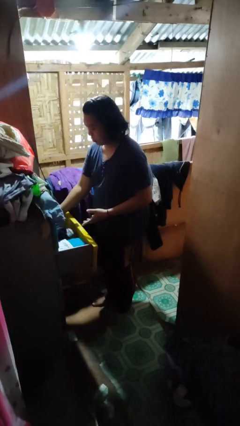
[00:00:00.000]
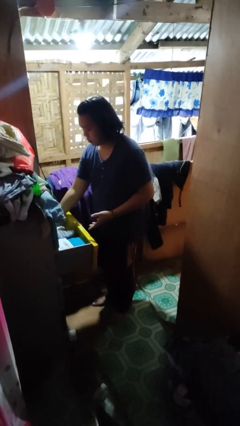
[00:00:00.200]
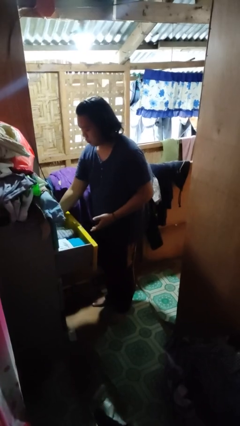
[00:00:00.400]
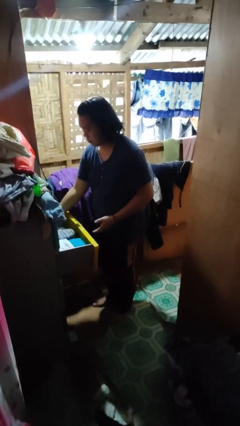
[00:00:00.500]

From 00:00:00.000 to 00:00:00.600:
person puts clothes into dresser

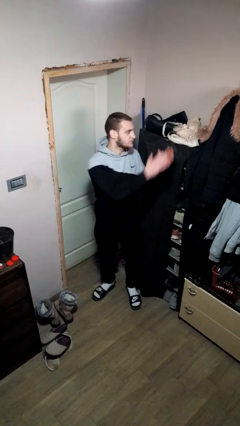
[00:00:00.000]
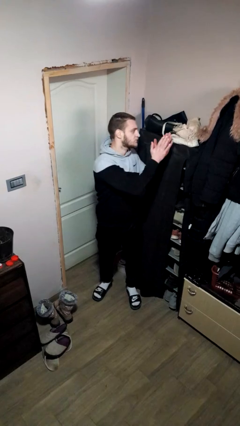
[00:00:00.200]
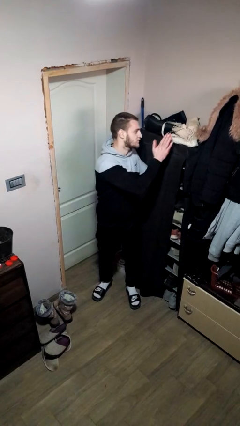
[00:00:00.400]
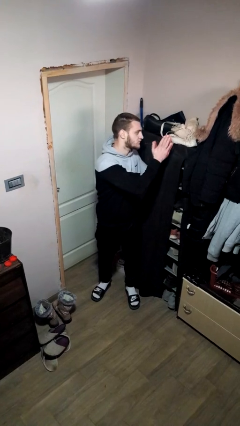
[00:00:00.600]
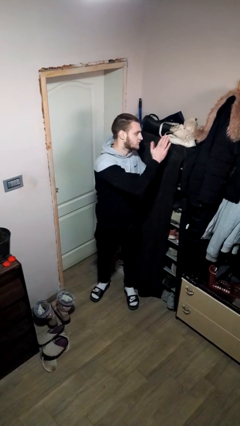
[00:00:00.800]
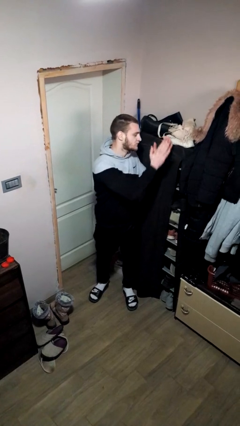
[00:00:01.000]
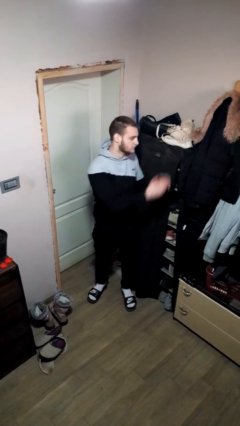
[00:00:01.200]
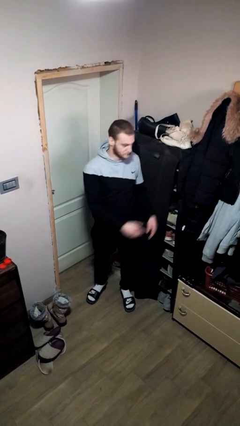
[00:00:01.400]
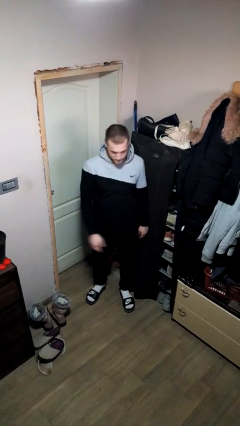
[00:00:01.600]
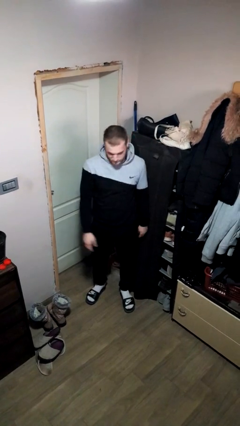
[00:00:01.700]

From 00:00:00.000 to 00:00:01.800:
person claps hands

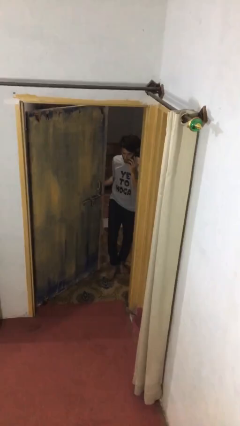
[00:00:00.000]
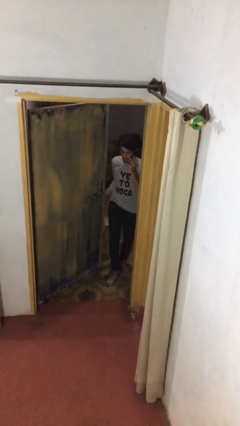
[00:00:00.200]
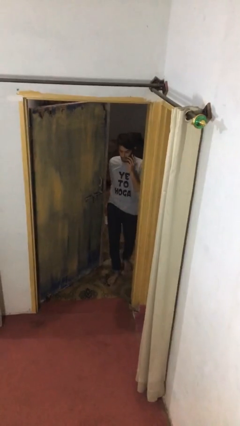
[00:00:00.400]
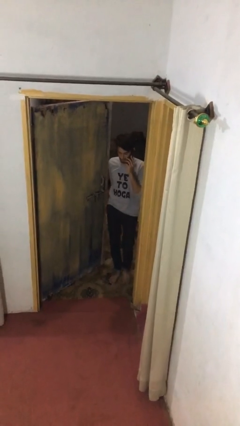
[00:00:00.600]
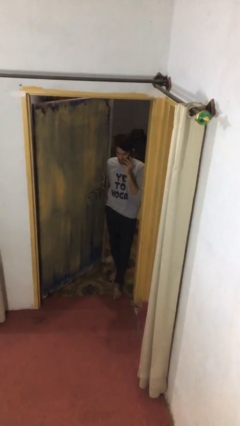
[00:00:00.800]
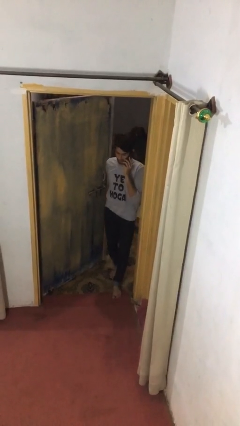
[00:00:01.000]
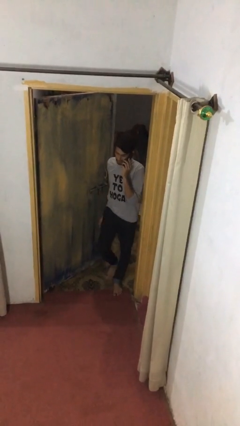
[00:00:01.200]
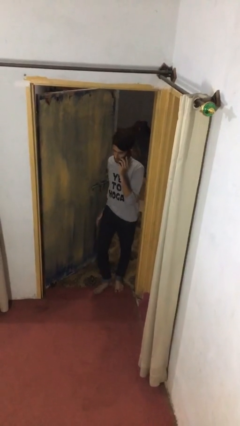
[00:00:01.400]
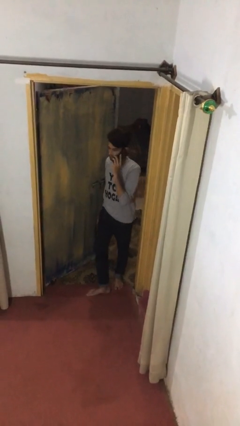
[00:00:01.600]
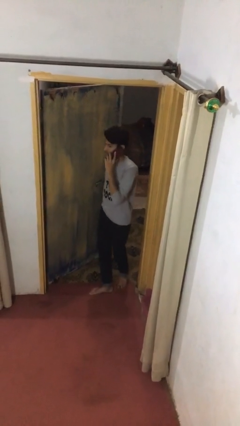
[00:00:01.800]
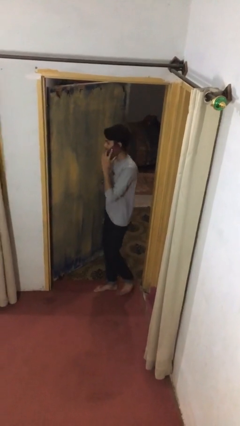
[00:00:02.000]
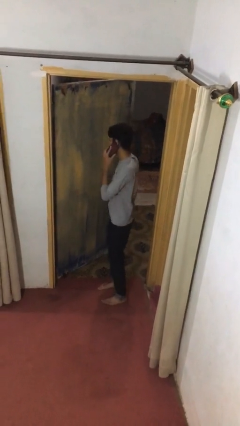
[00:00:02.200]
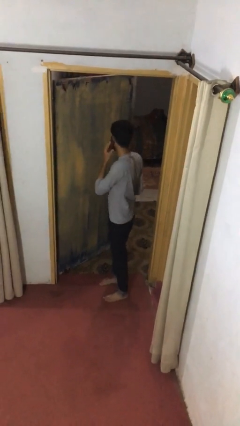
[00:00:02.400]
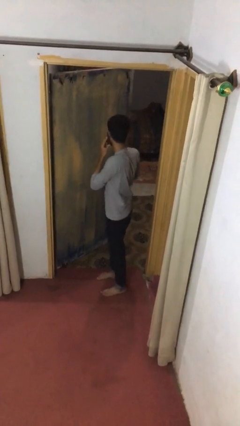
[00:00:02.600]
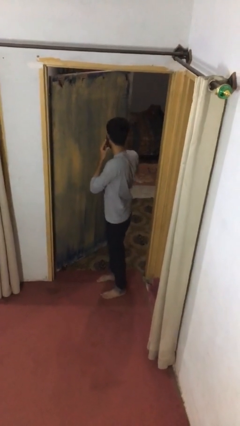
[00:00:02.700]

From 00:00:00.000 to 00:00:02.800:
person enters scene through structure

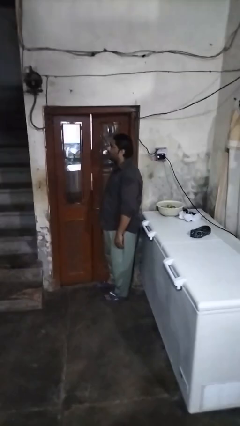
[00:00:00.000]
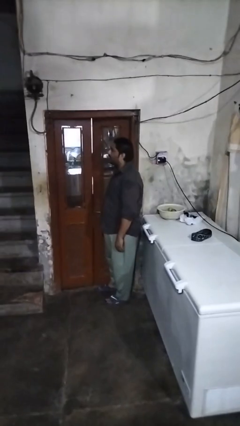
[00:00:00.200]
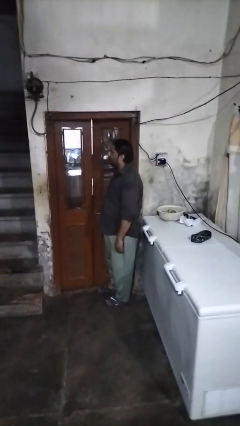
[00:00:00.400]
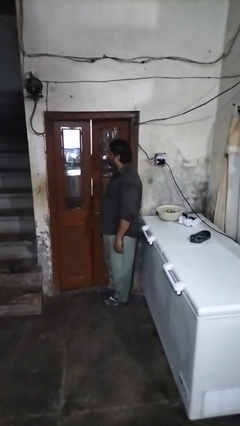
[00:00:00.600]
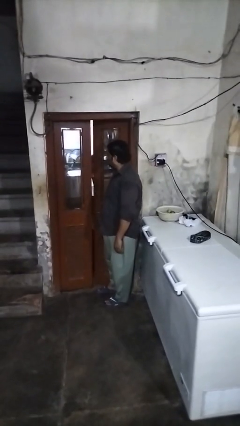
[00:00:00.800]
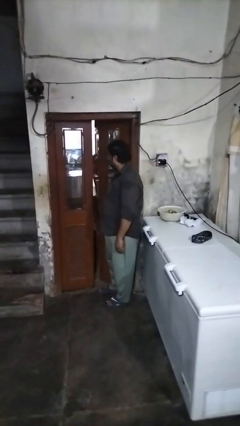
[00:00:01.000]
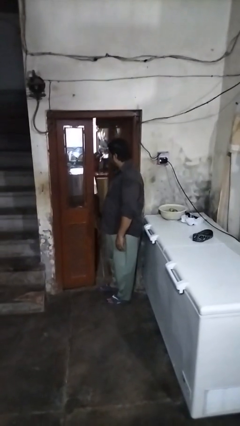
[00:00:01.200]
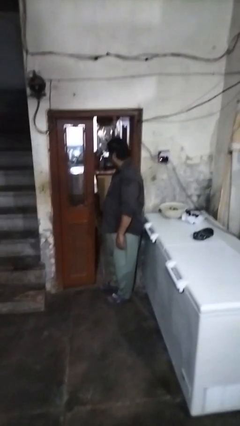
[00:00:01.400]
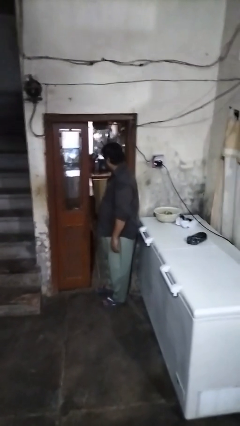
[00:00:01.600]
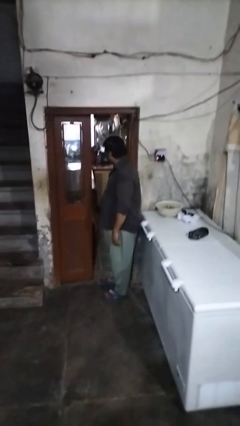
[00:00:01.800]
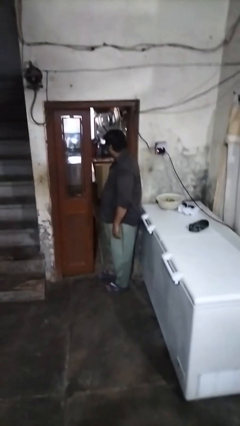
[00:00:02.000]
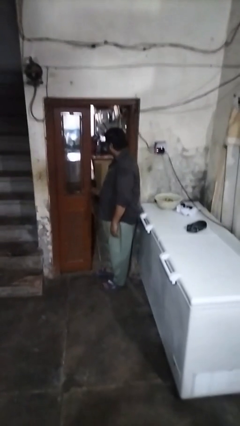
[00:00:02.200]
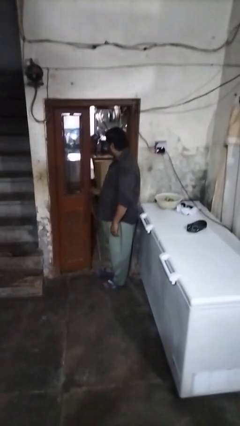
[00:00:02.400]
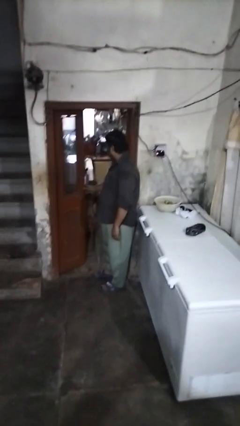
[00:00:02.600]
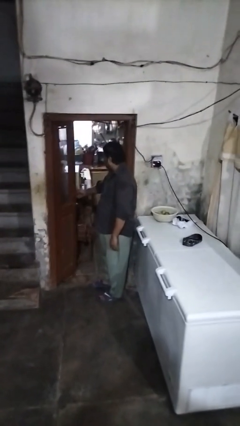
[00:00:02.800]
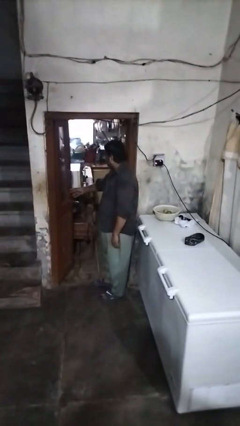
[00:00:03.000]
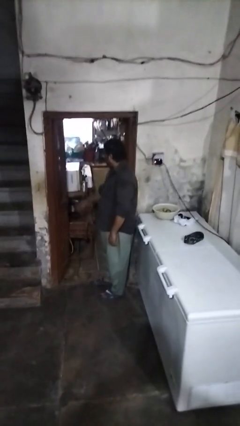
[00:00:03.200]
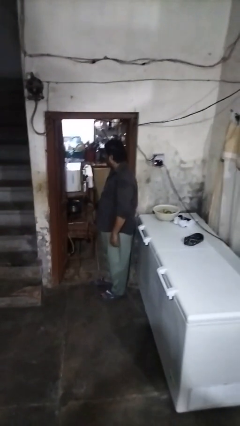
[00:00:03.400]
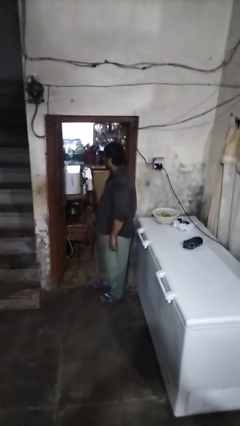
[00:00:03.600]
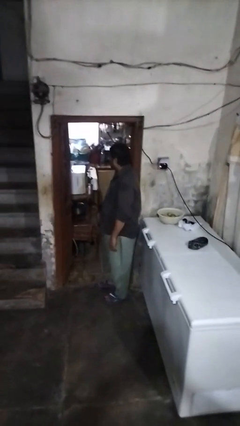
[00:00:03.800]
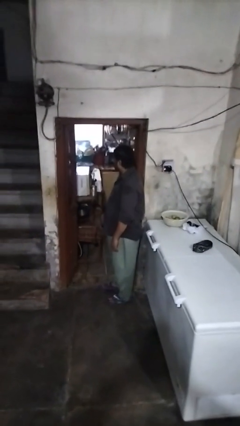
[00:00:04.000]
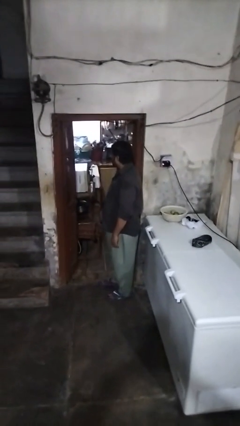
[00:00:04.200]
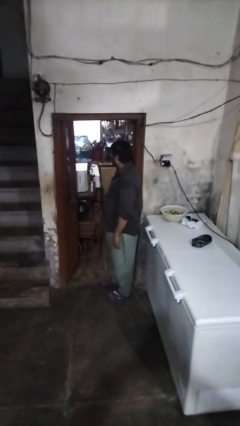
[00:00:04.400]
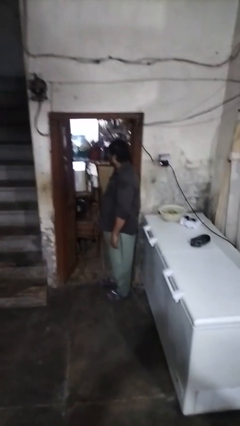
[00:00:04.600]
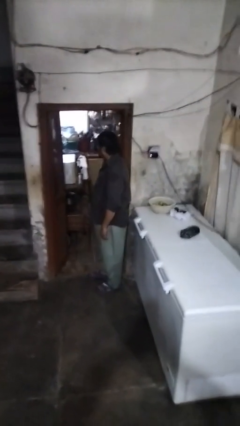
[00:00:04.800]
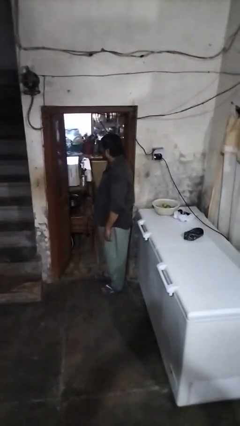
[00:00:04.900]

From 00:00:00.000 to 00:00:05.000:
person opens closet door

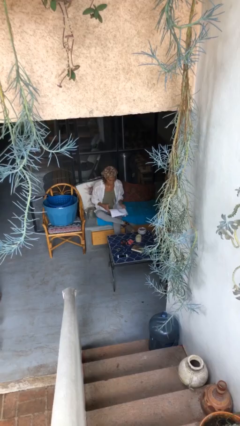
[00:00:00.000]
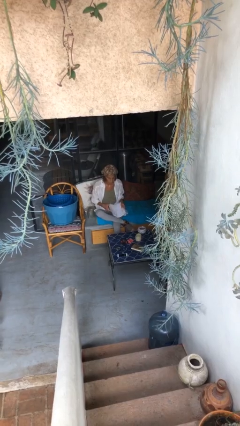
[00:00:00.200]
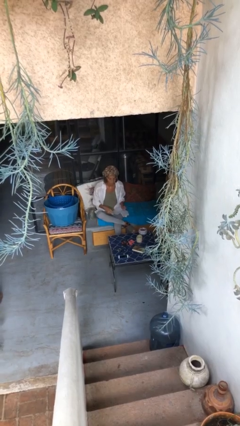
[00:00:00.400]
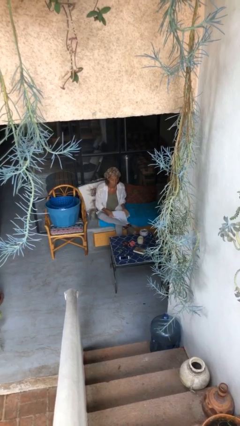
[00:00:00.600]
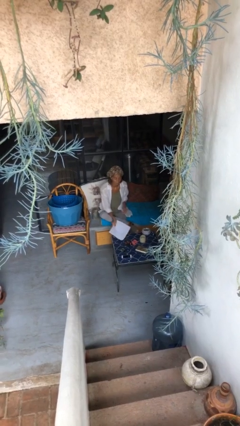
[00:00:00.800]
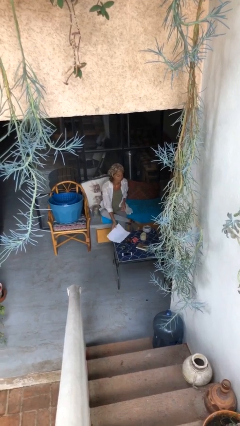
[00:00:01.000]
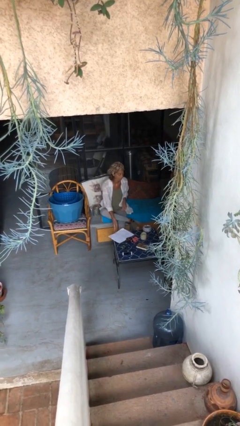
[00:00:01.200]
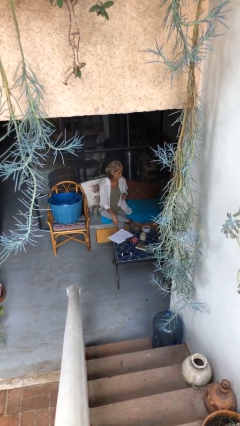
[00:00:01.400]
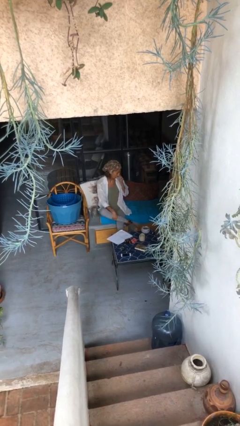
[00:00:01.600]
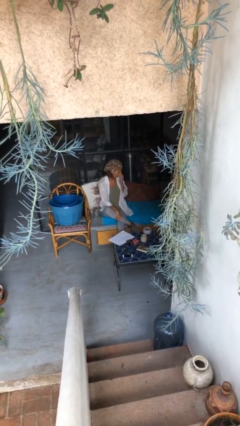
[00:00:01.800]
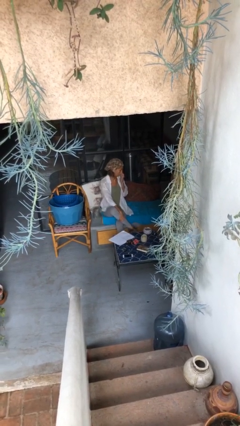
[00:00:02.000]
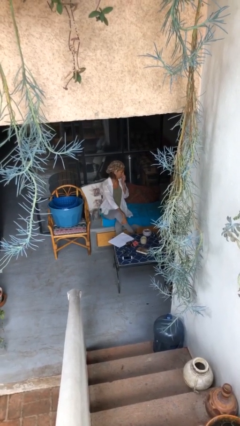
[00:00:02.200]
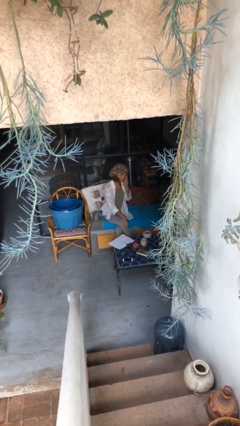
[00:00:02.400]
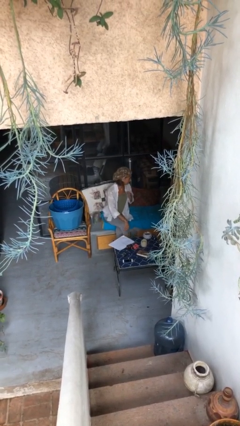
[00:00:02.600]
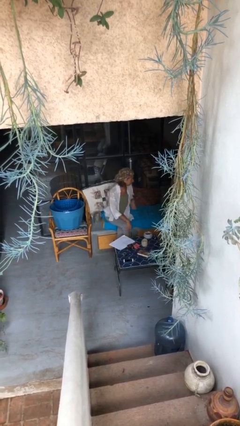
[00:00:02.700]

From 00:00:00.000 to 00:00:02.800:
person puts down object on table

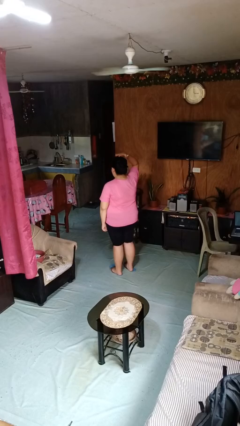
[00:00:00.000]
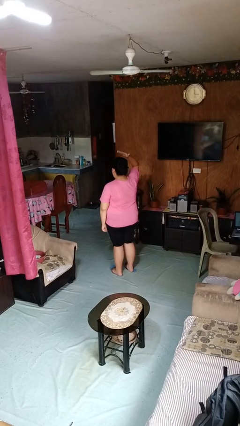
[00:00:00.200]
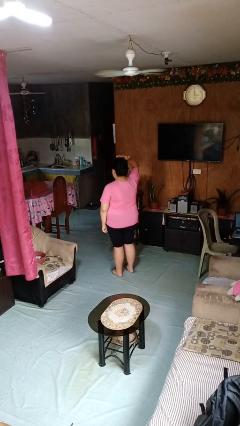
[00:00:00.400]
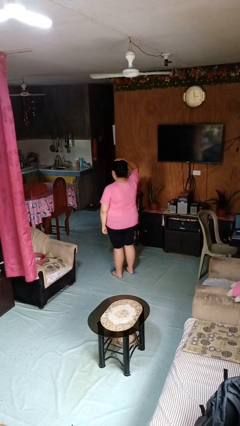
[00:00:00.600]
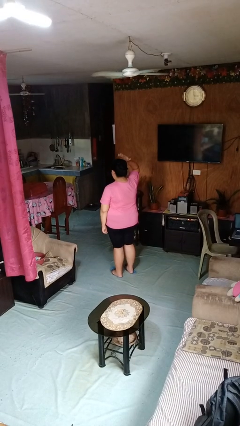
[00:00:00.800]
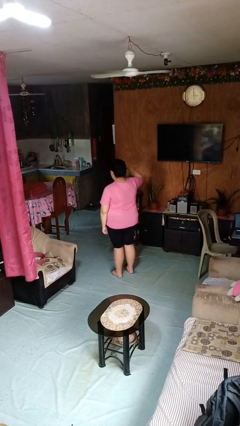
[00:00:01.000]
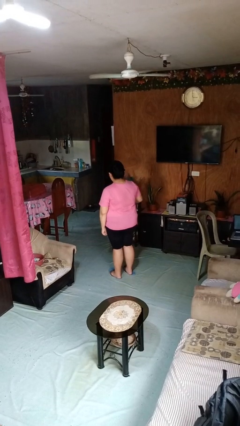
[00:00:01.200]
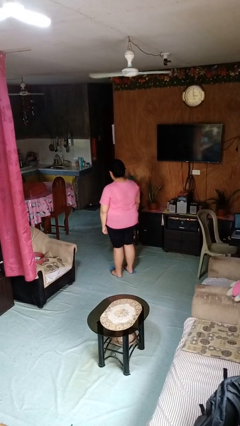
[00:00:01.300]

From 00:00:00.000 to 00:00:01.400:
person pats head

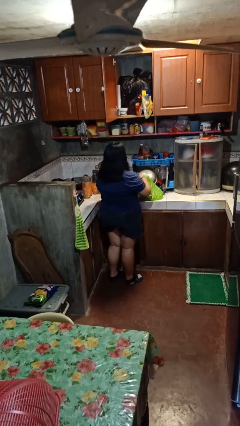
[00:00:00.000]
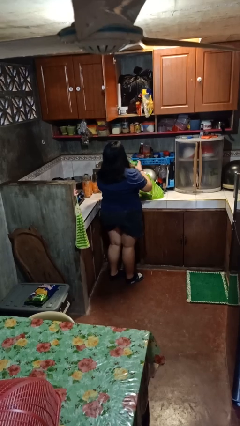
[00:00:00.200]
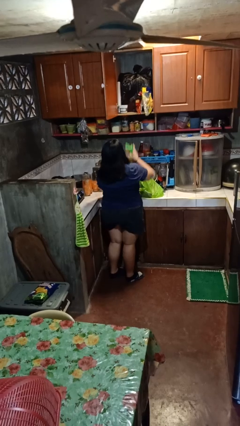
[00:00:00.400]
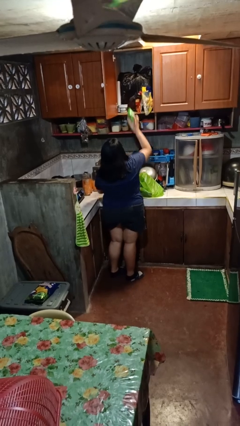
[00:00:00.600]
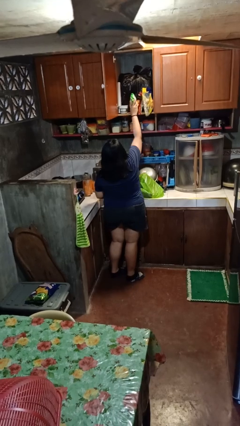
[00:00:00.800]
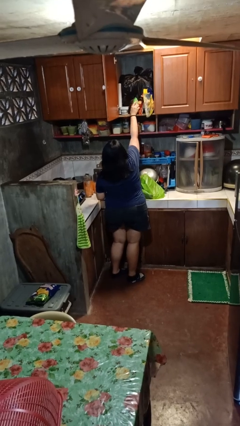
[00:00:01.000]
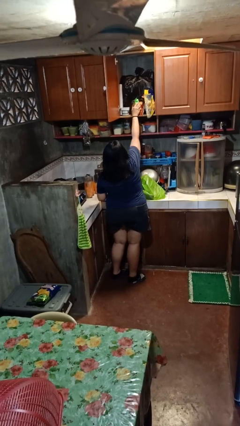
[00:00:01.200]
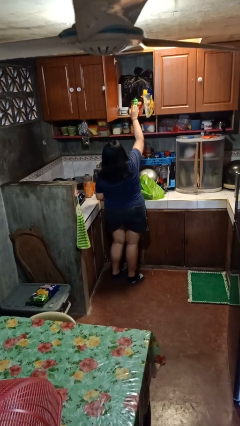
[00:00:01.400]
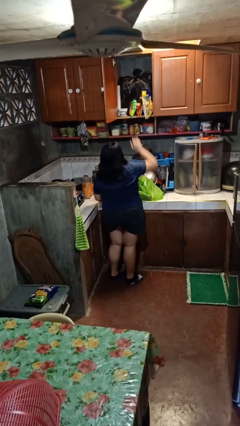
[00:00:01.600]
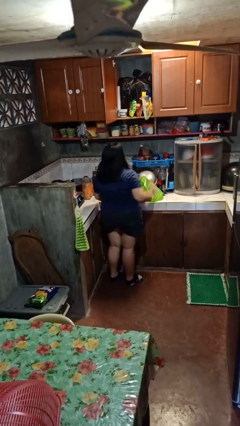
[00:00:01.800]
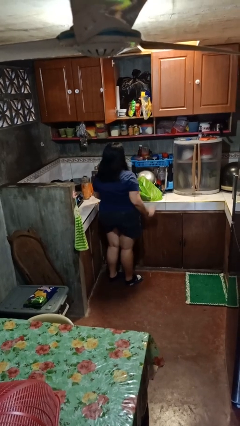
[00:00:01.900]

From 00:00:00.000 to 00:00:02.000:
person loads groceries into cabinet

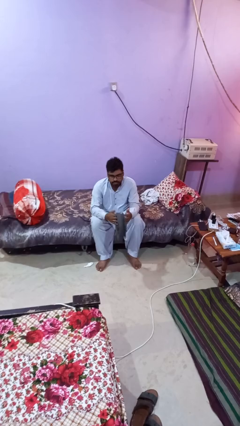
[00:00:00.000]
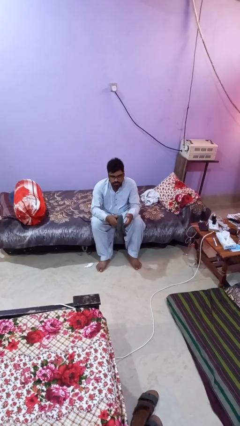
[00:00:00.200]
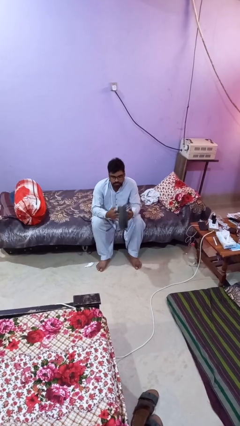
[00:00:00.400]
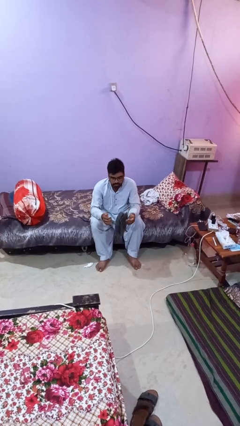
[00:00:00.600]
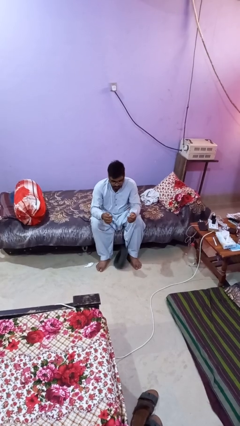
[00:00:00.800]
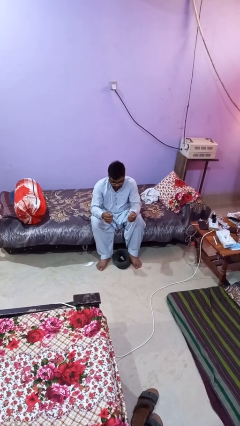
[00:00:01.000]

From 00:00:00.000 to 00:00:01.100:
person drops object
